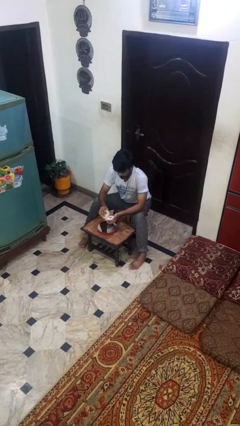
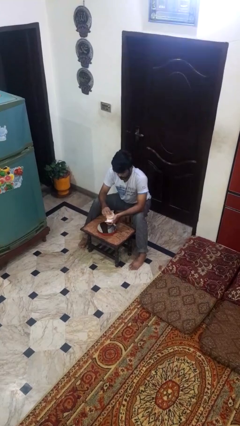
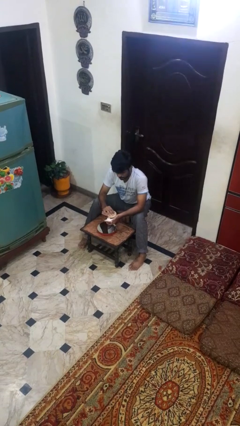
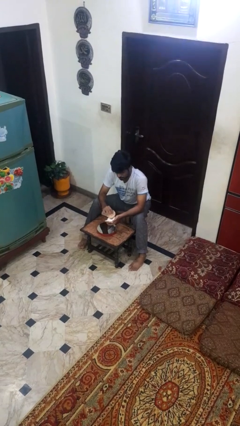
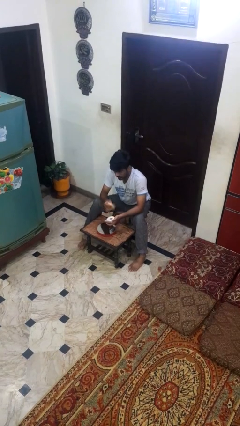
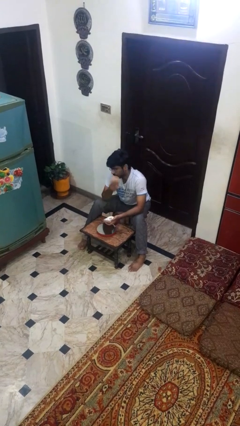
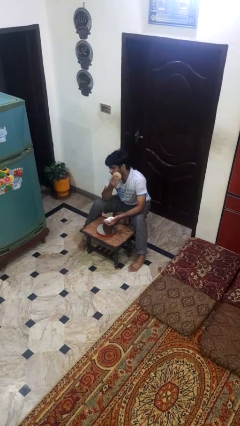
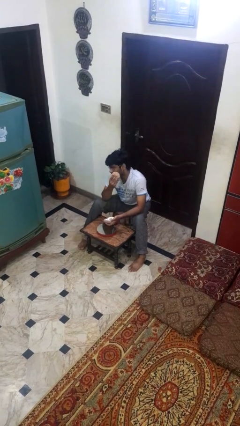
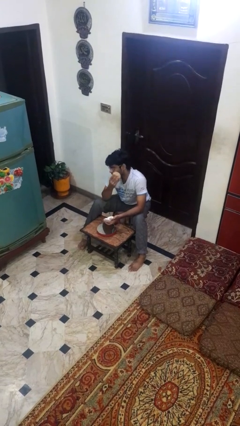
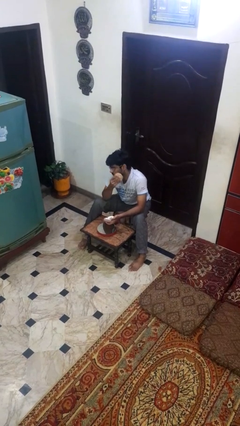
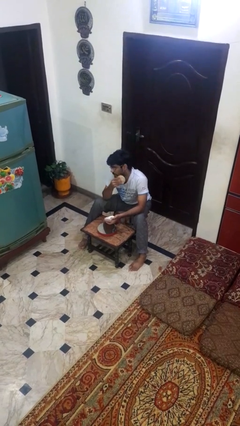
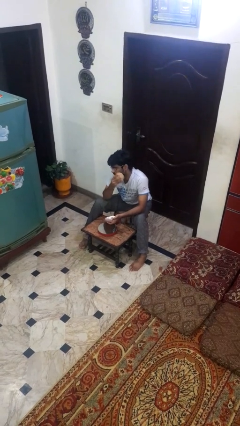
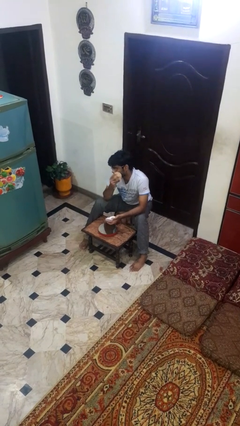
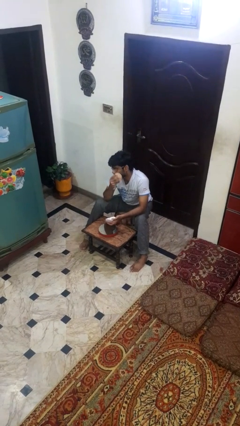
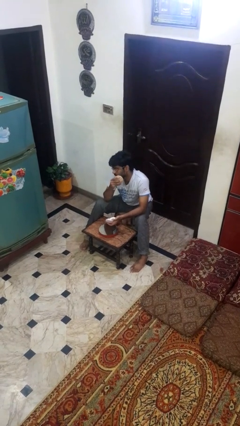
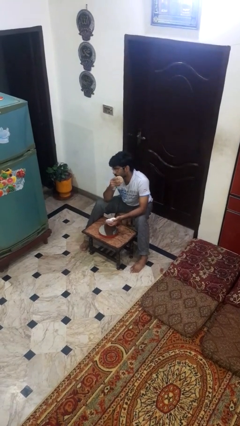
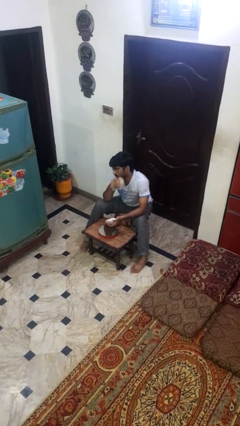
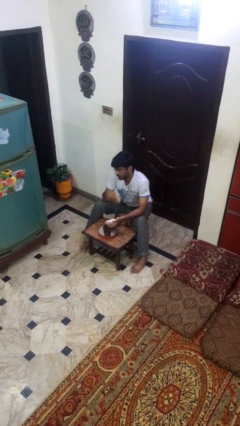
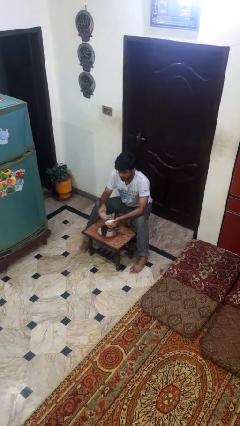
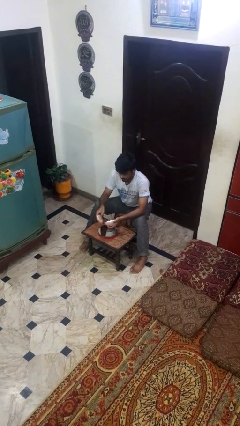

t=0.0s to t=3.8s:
person applies foundation makeup

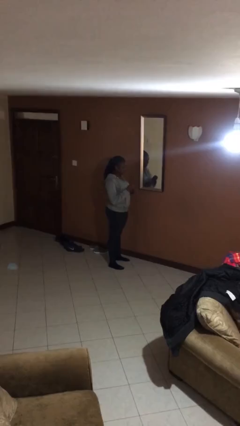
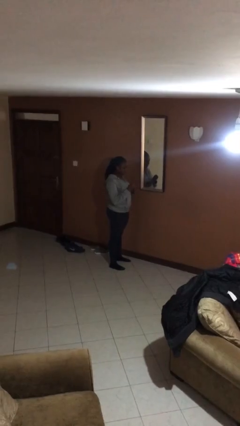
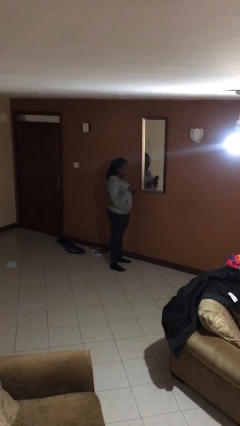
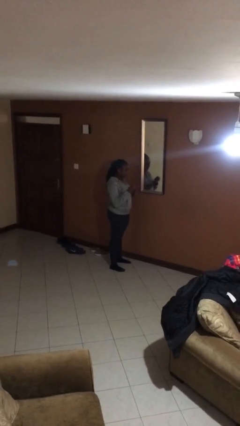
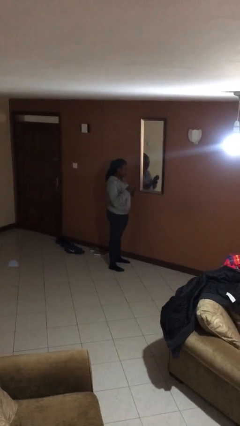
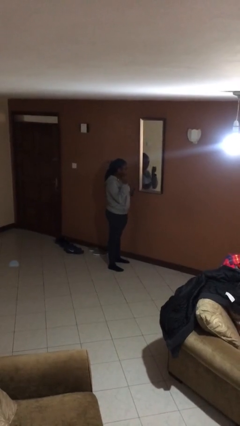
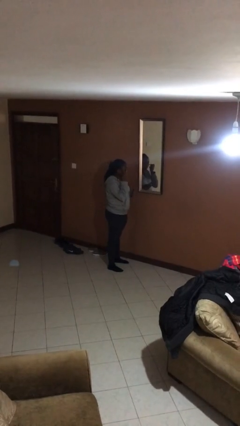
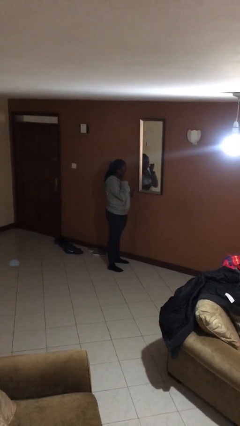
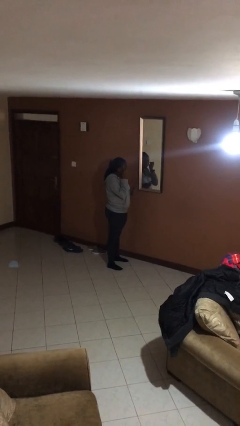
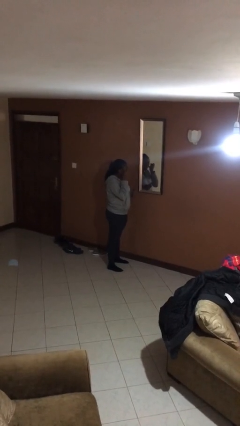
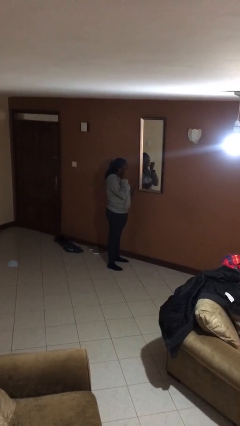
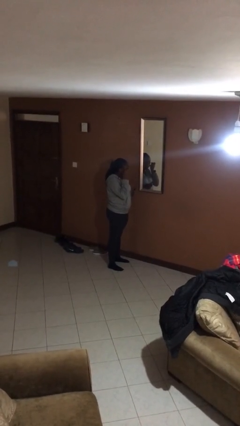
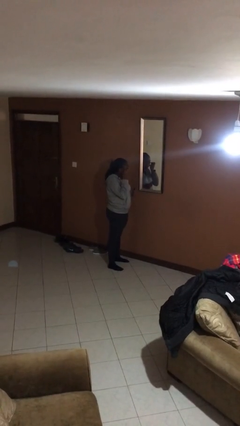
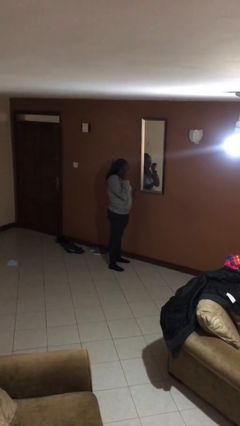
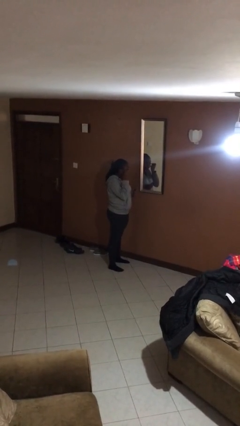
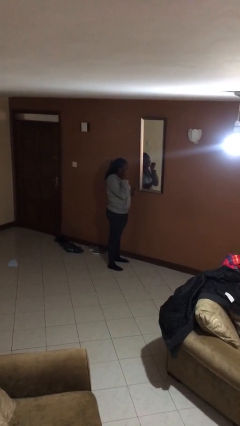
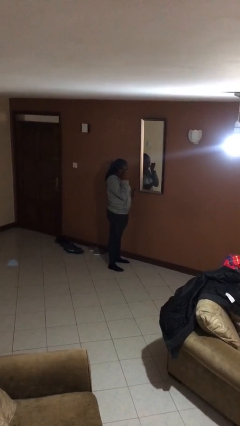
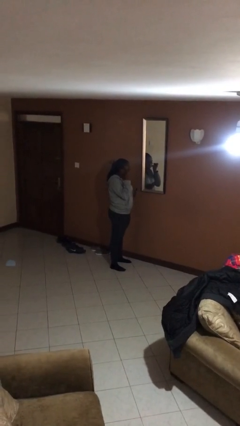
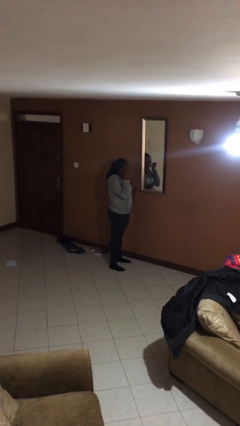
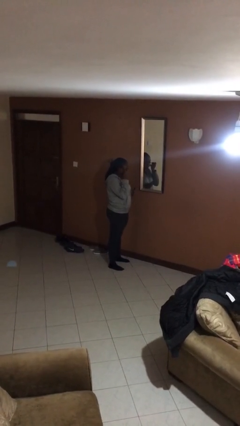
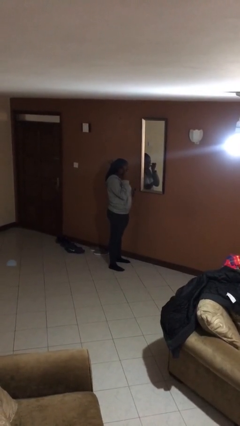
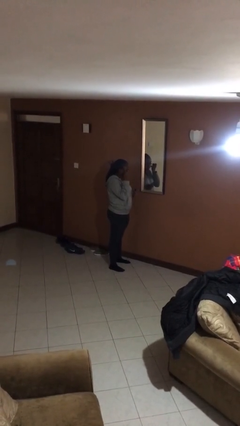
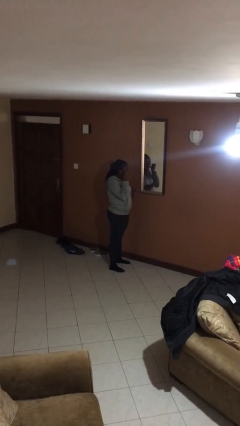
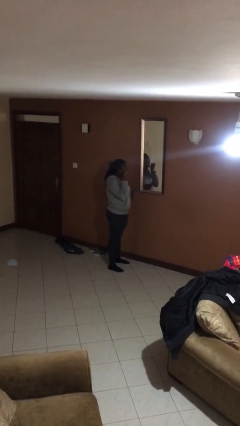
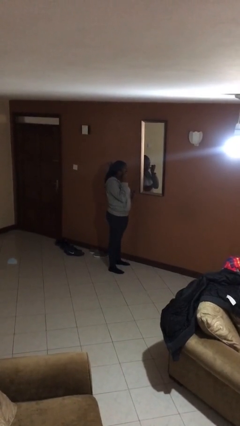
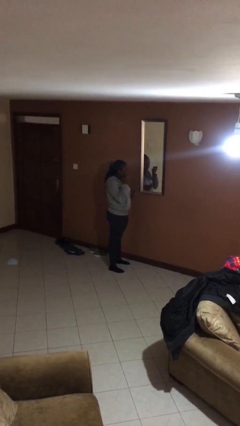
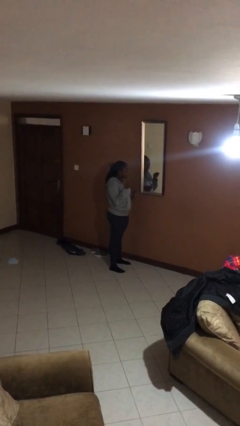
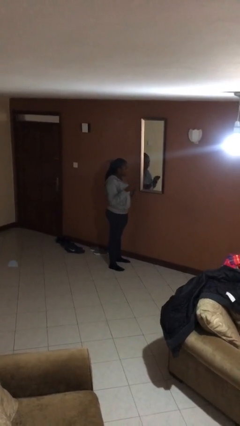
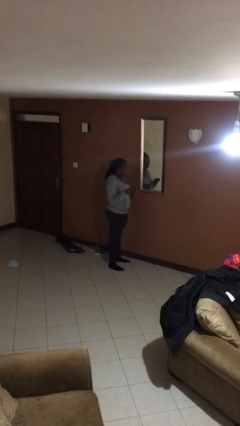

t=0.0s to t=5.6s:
person applies eye makeup

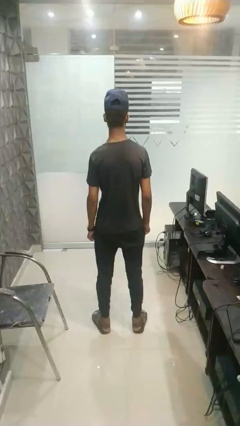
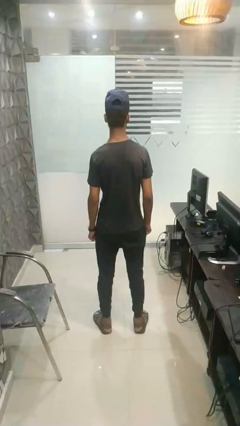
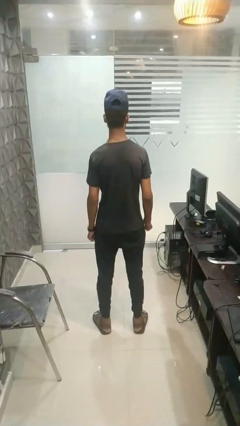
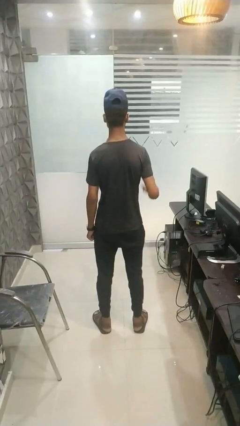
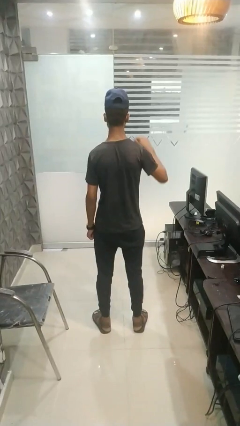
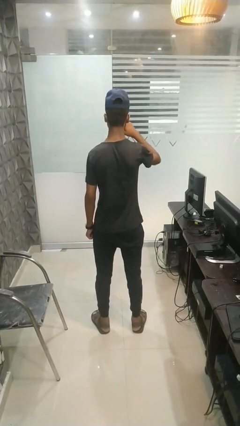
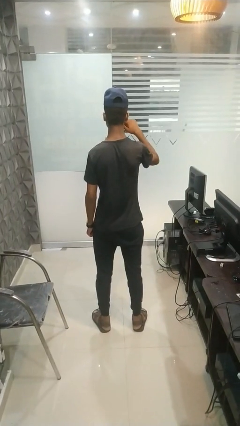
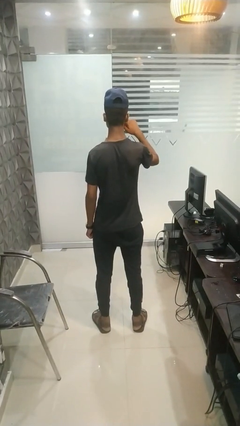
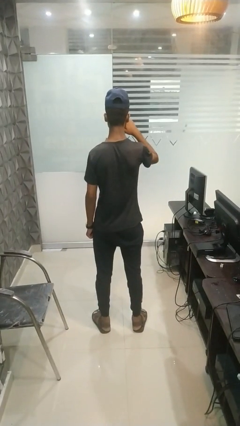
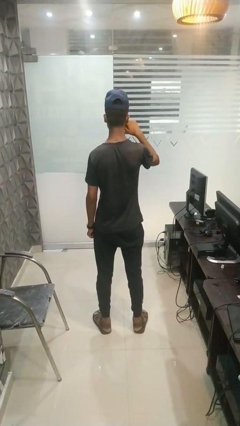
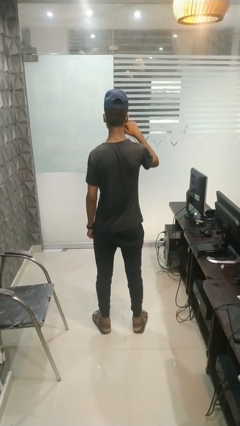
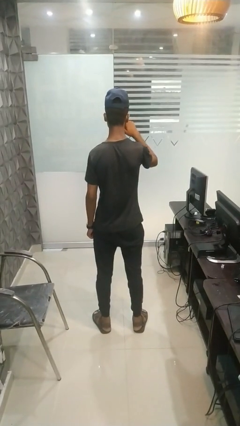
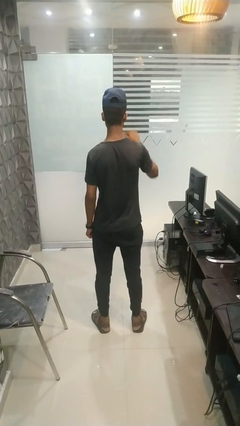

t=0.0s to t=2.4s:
person brushes teeth

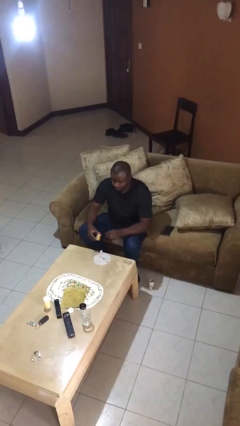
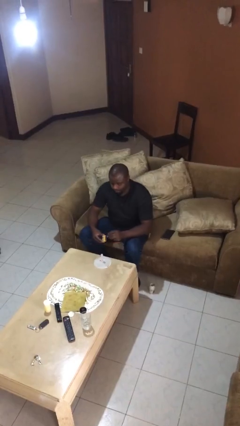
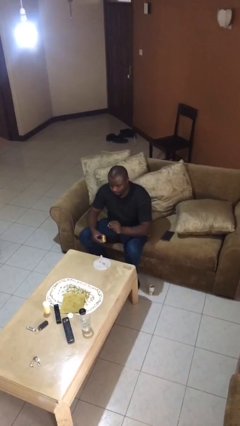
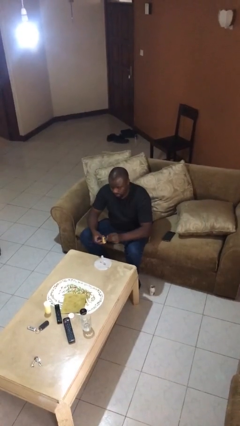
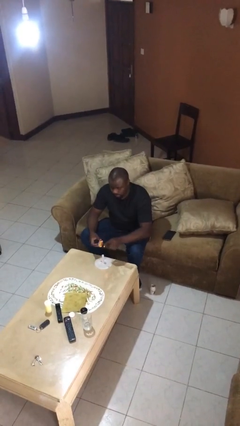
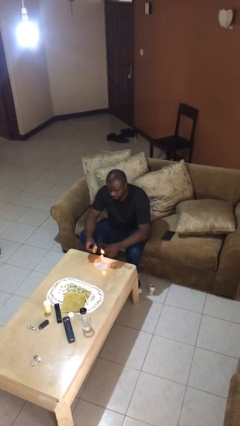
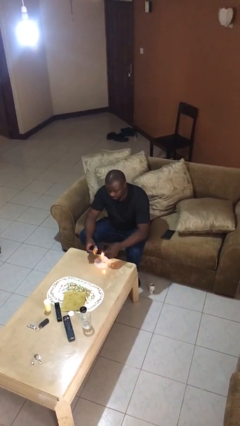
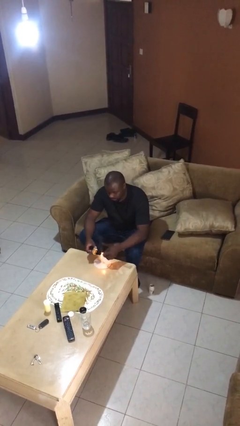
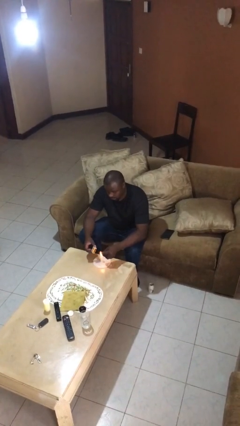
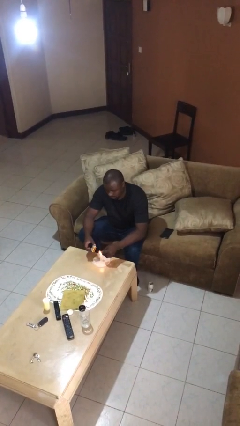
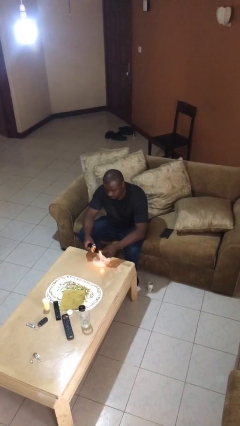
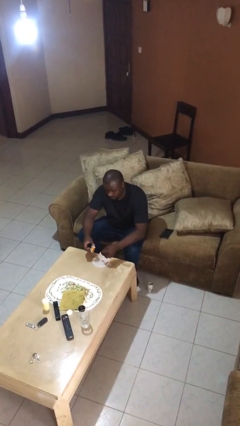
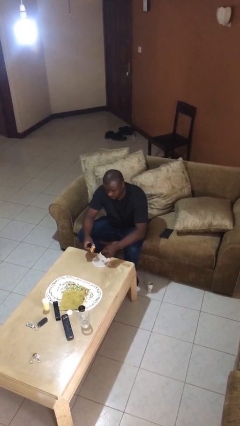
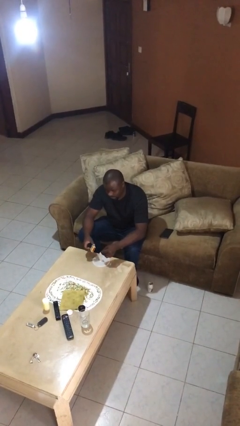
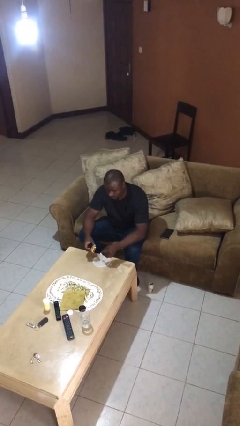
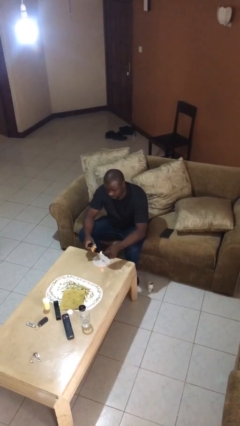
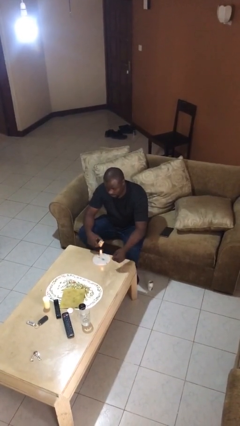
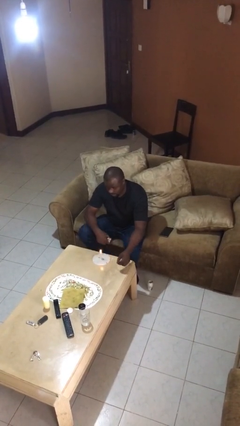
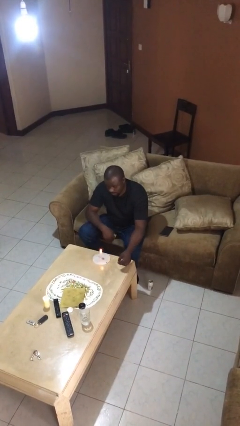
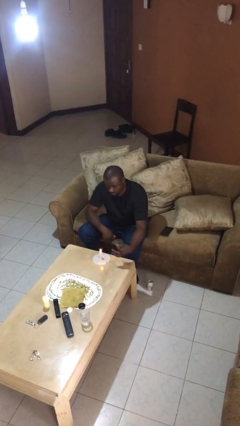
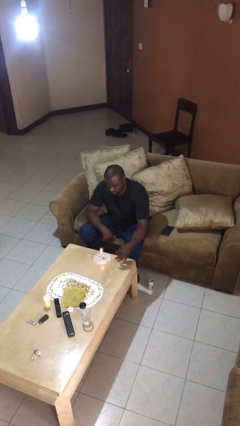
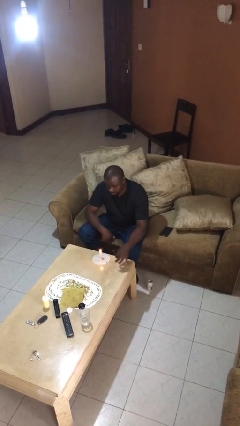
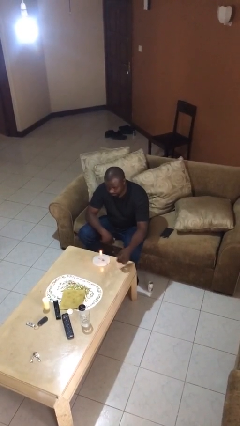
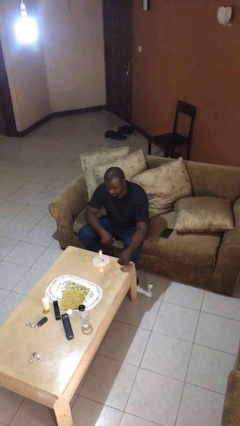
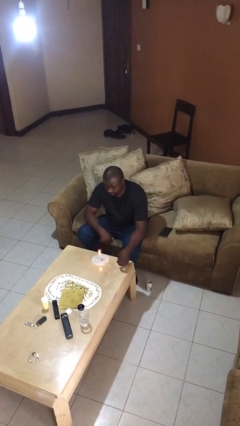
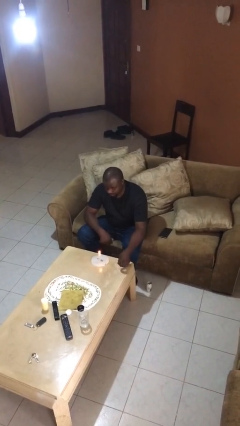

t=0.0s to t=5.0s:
person lights candle

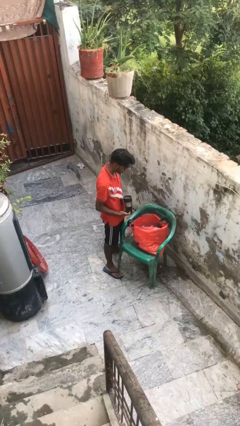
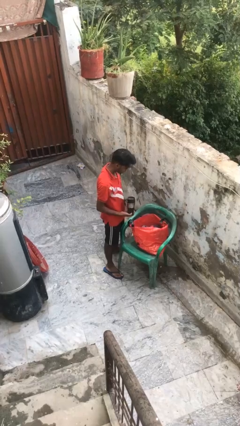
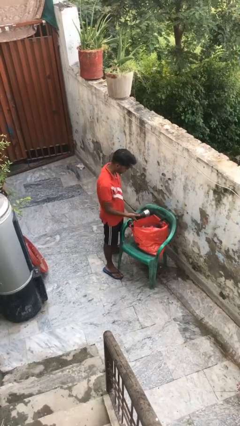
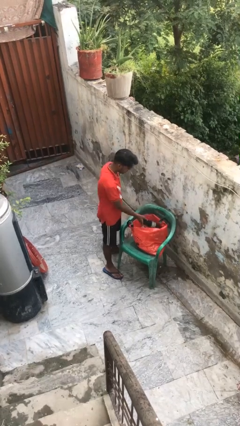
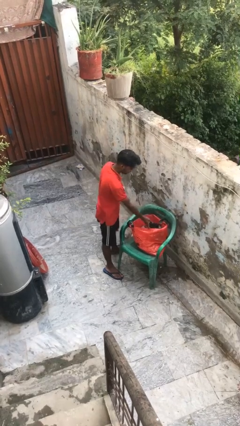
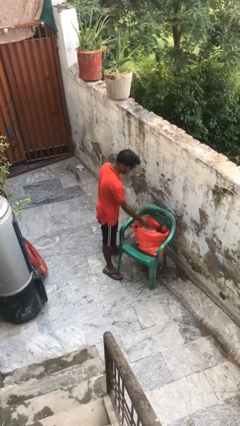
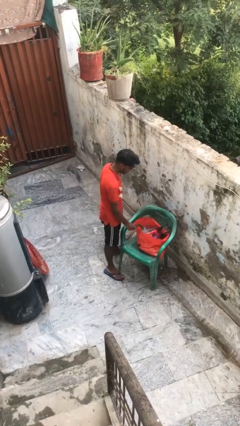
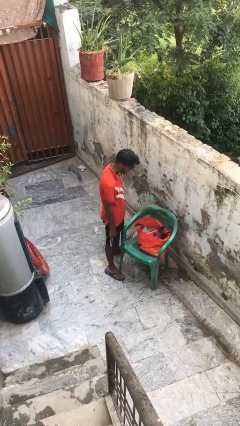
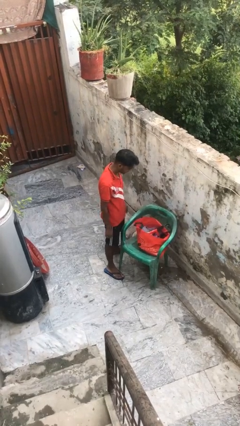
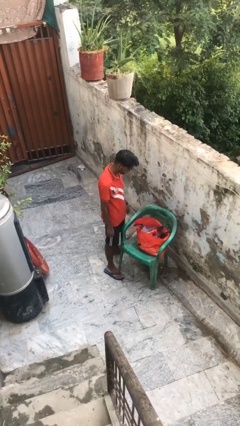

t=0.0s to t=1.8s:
person puts object into bag
